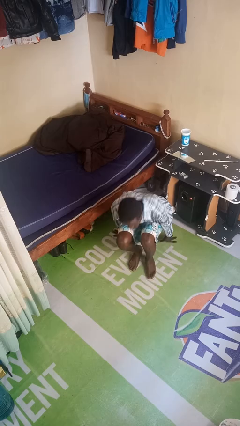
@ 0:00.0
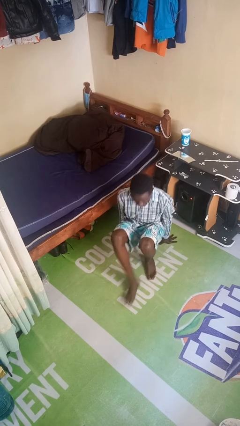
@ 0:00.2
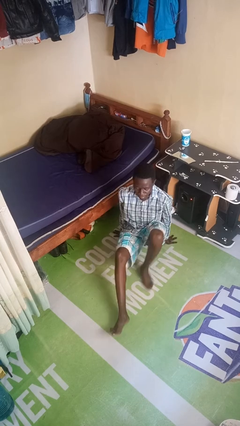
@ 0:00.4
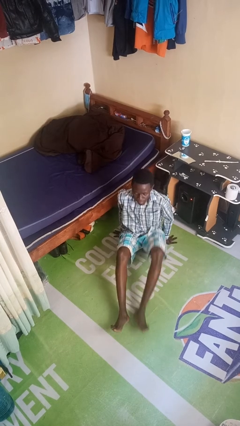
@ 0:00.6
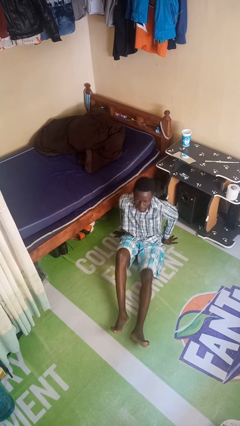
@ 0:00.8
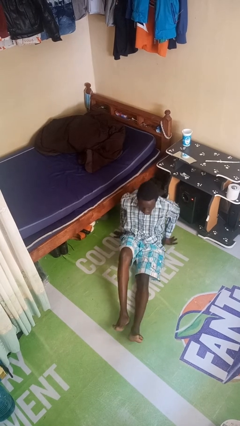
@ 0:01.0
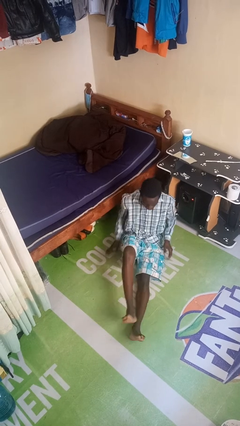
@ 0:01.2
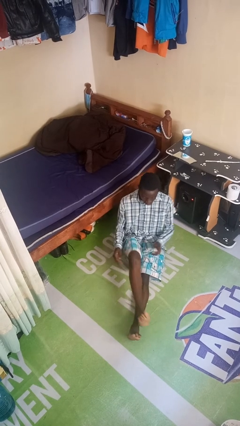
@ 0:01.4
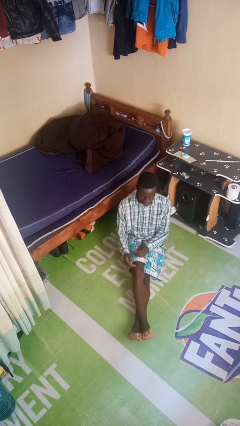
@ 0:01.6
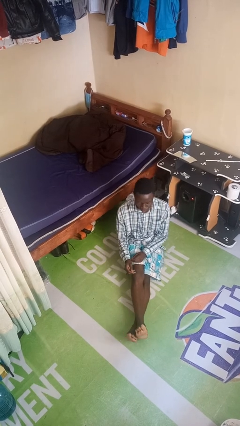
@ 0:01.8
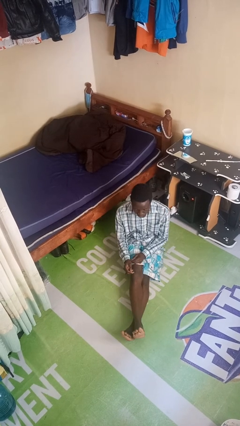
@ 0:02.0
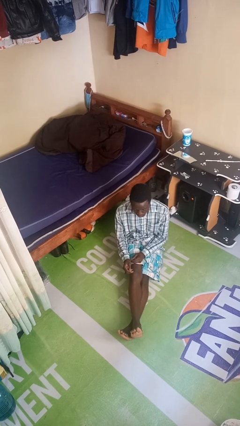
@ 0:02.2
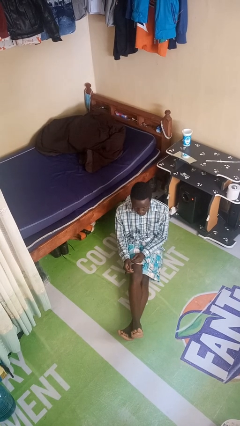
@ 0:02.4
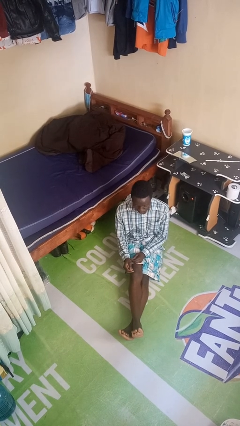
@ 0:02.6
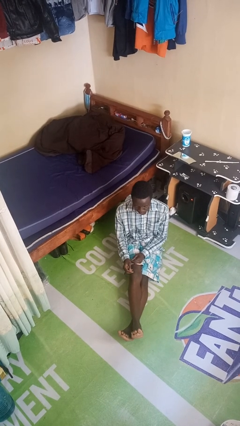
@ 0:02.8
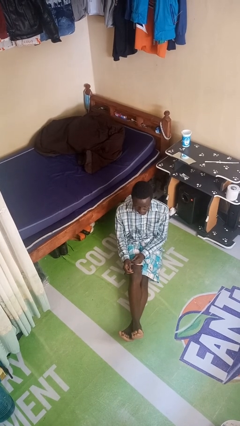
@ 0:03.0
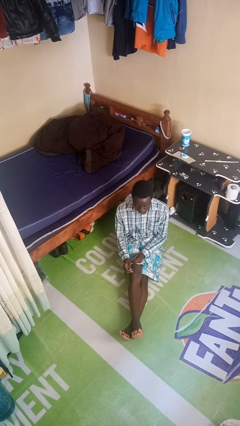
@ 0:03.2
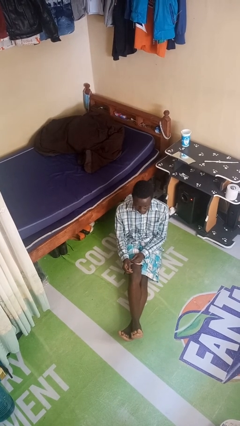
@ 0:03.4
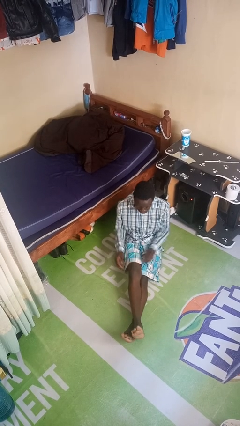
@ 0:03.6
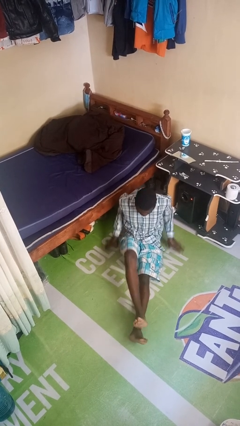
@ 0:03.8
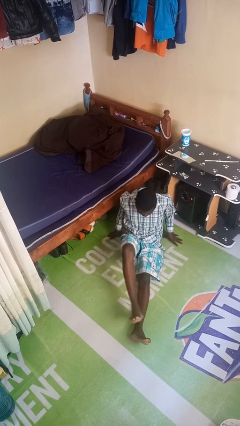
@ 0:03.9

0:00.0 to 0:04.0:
person sits crisscross

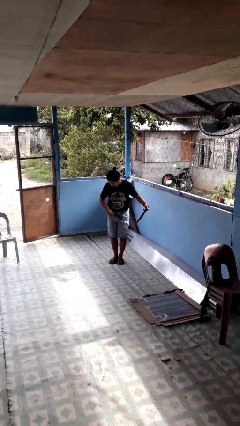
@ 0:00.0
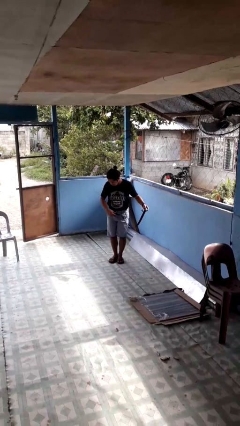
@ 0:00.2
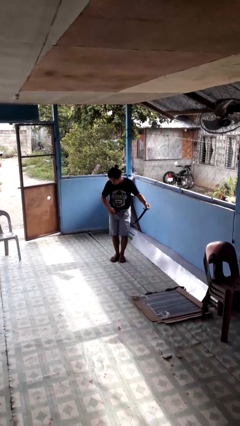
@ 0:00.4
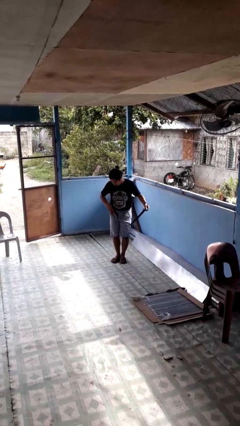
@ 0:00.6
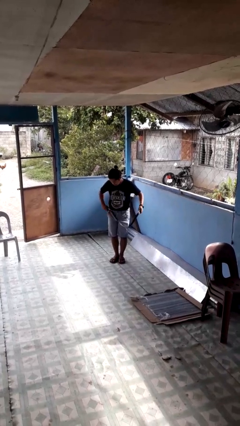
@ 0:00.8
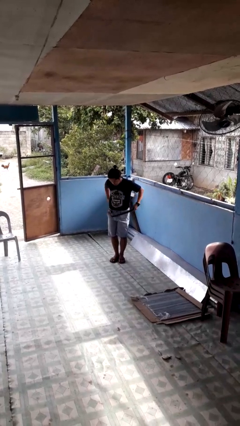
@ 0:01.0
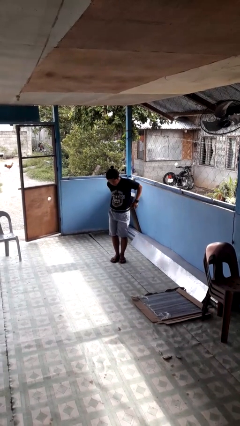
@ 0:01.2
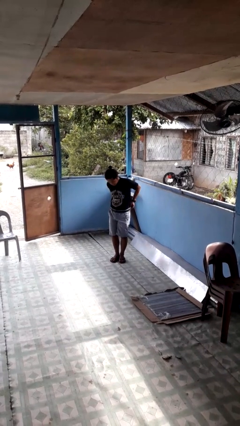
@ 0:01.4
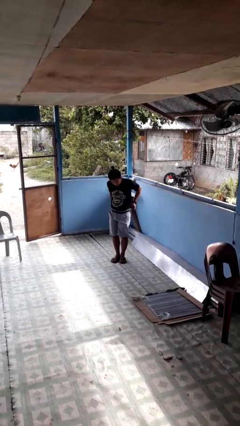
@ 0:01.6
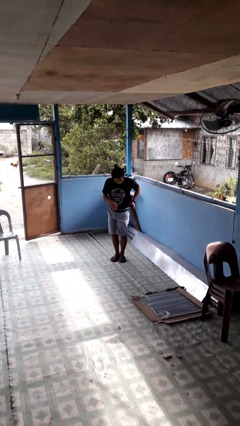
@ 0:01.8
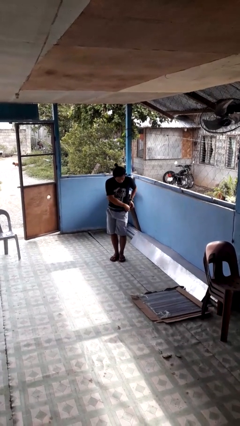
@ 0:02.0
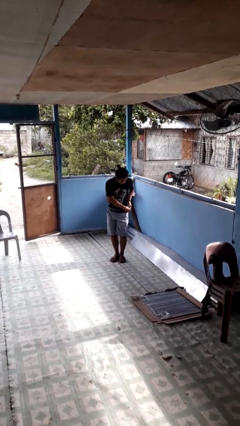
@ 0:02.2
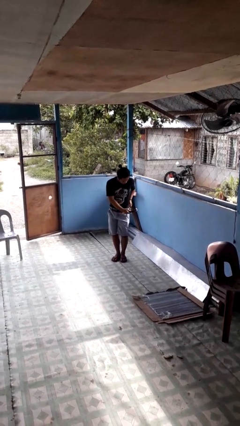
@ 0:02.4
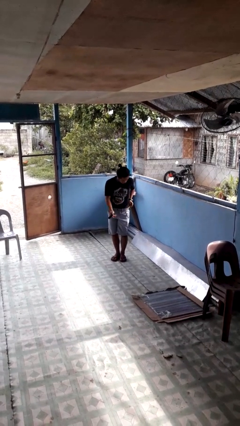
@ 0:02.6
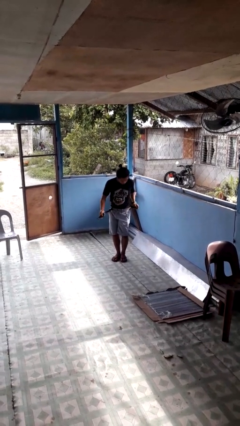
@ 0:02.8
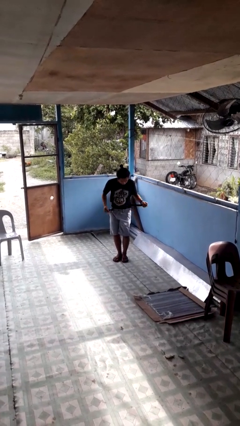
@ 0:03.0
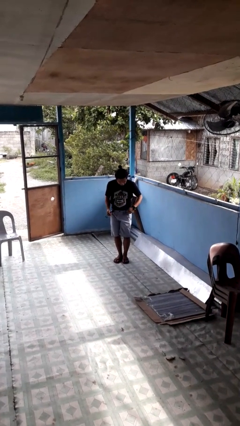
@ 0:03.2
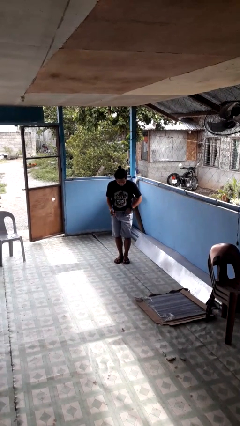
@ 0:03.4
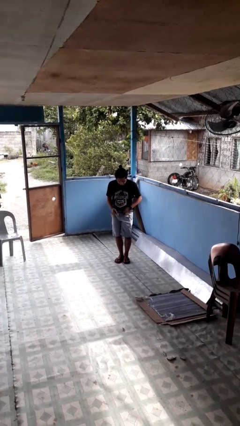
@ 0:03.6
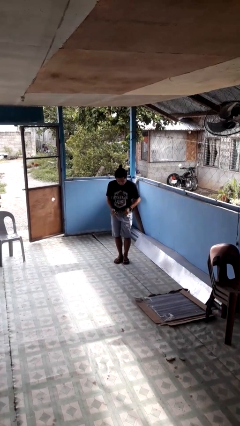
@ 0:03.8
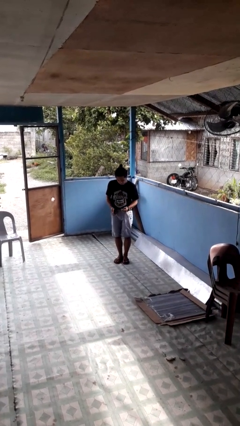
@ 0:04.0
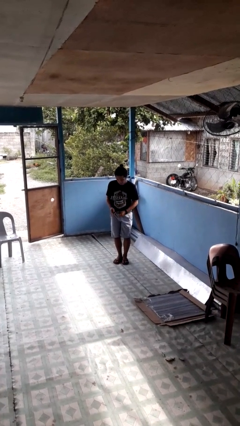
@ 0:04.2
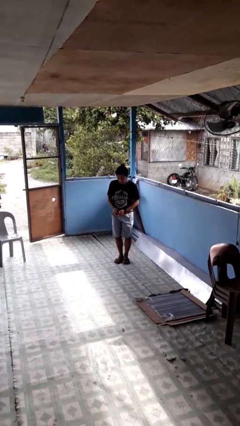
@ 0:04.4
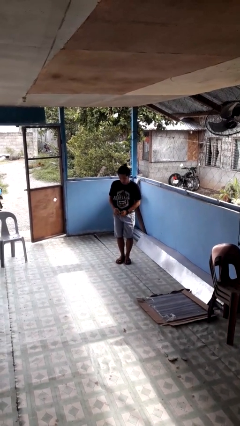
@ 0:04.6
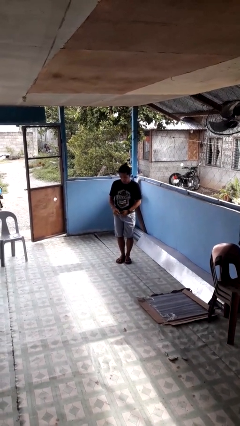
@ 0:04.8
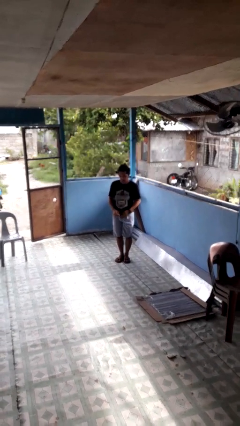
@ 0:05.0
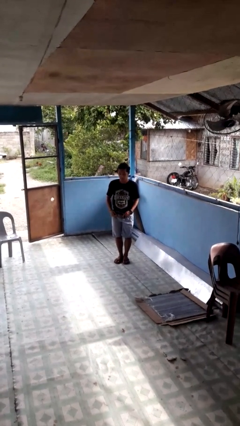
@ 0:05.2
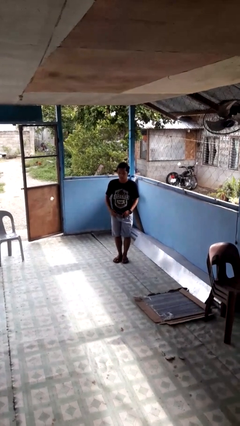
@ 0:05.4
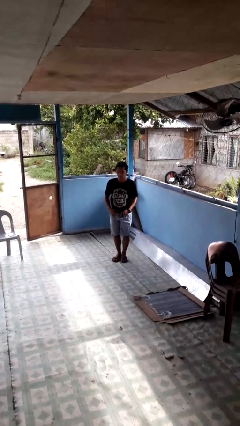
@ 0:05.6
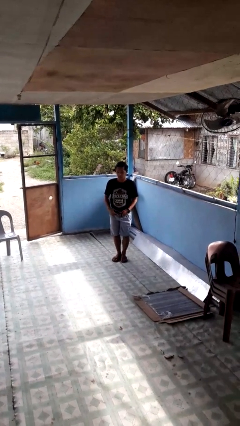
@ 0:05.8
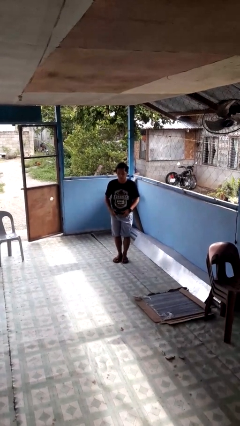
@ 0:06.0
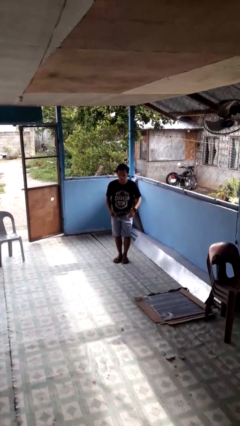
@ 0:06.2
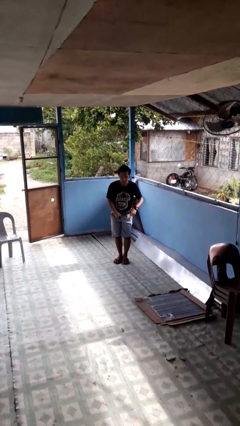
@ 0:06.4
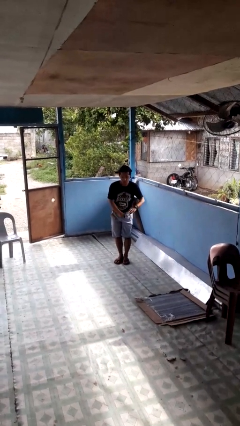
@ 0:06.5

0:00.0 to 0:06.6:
person puts on belt

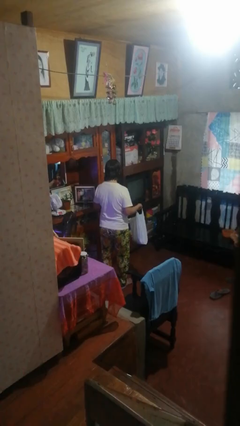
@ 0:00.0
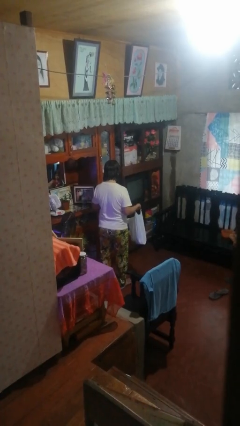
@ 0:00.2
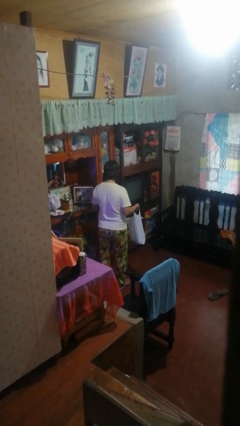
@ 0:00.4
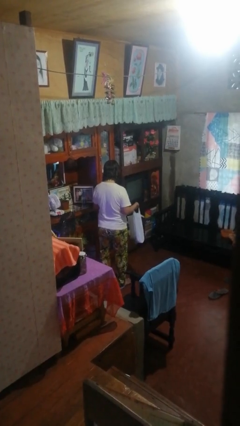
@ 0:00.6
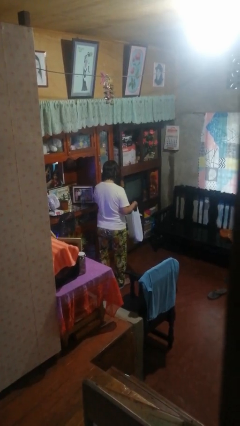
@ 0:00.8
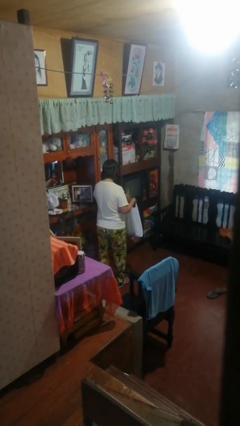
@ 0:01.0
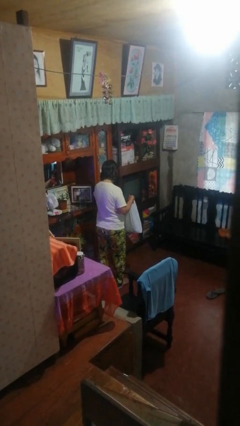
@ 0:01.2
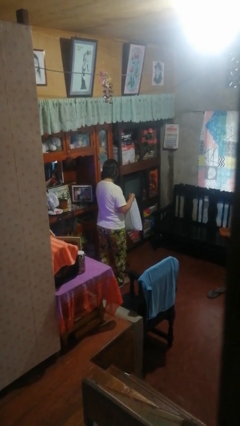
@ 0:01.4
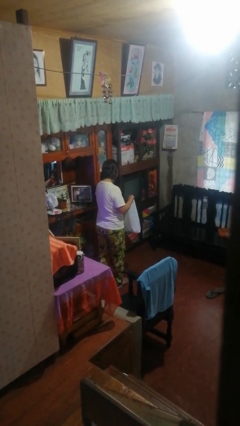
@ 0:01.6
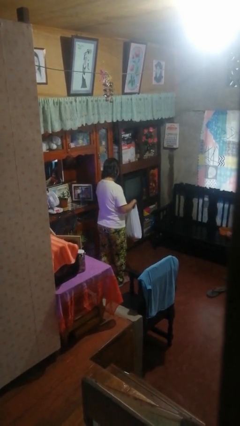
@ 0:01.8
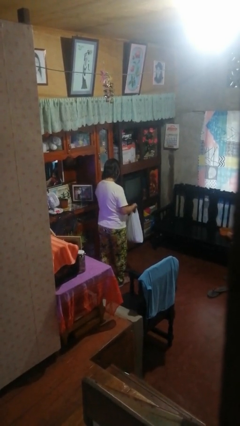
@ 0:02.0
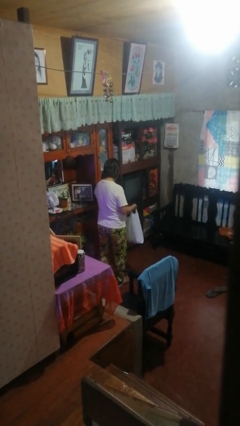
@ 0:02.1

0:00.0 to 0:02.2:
person puts object into bag

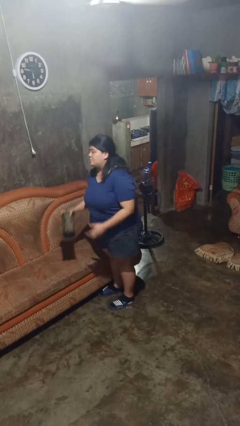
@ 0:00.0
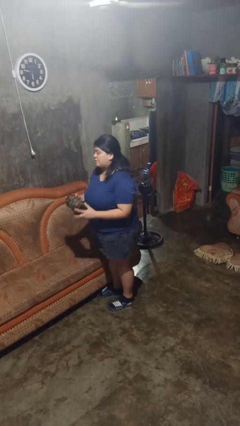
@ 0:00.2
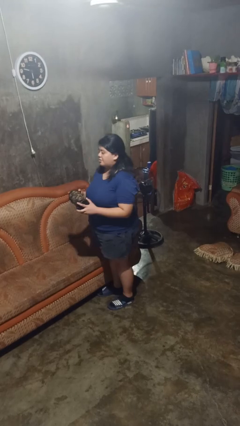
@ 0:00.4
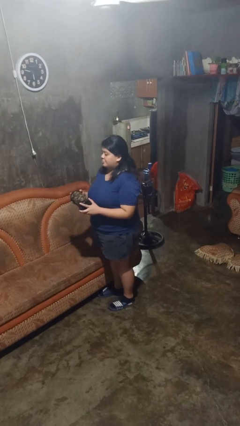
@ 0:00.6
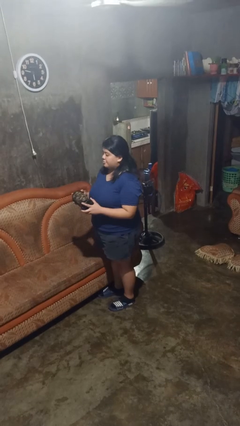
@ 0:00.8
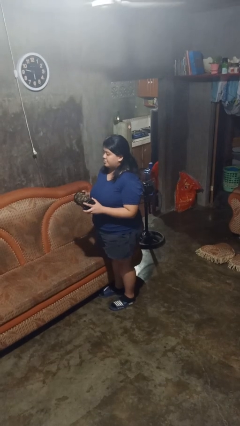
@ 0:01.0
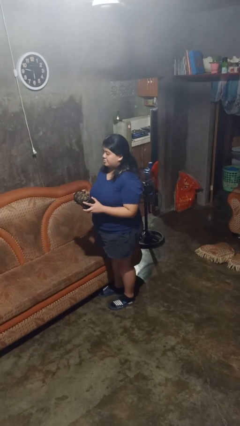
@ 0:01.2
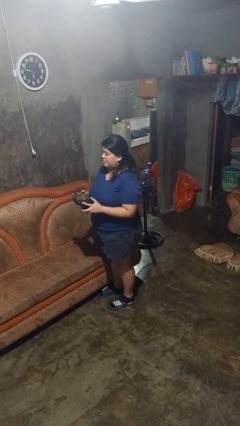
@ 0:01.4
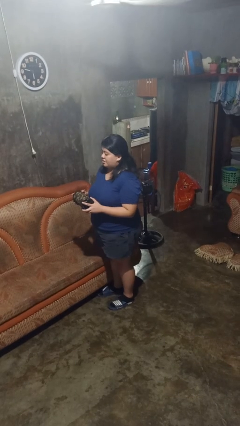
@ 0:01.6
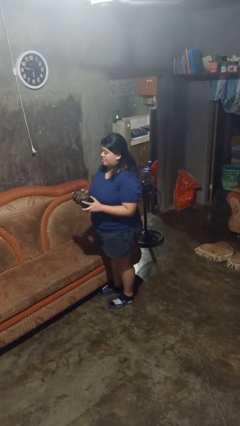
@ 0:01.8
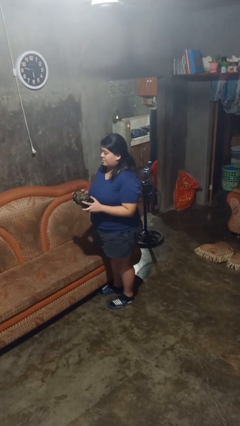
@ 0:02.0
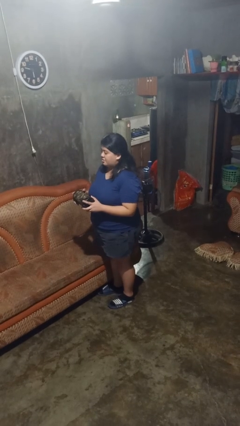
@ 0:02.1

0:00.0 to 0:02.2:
person picks up object from couch

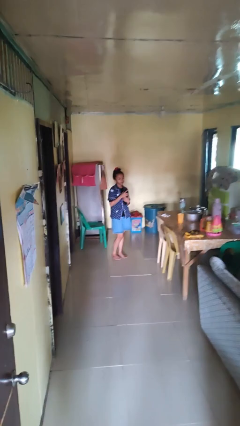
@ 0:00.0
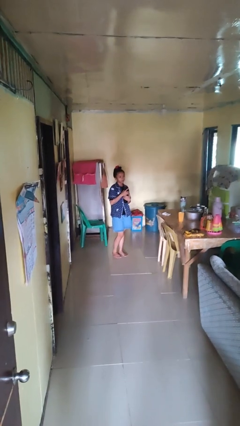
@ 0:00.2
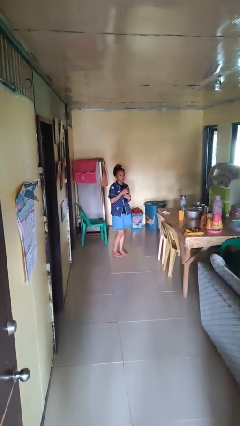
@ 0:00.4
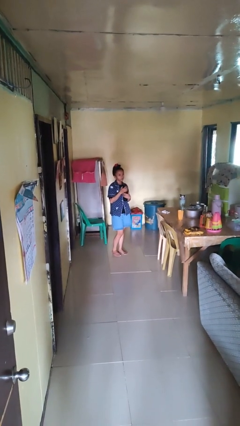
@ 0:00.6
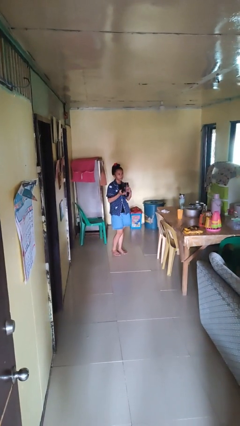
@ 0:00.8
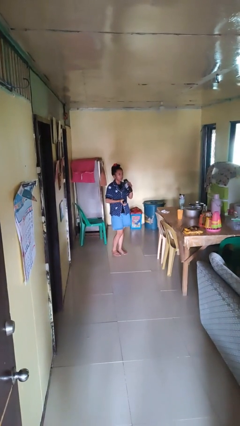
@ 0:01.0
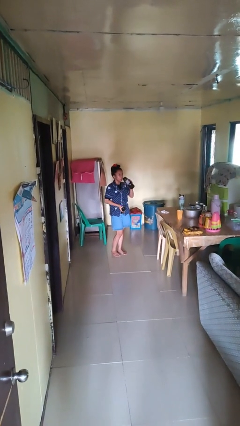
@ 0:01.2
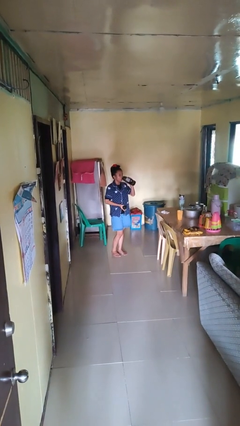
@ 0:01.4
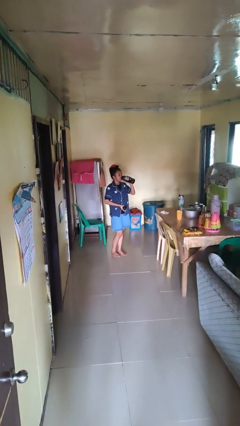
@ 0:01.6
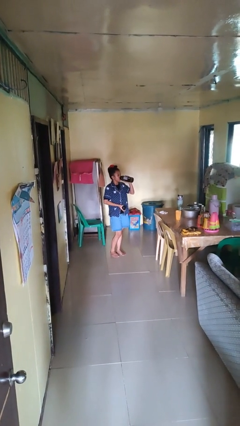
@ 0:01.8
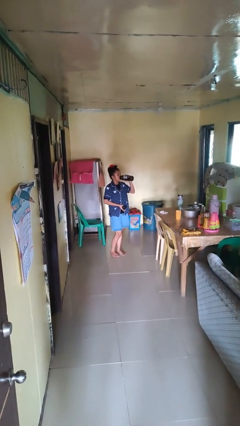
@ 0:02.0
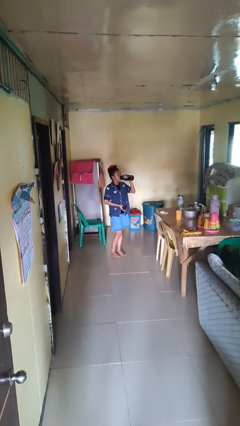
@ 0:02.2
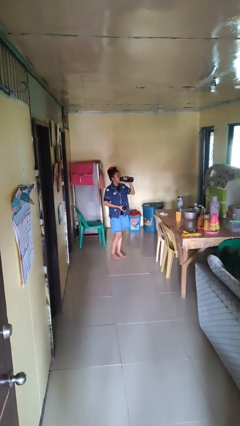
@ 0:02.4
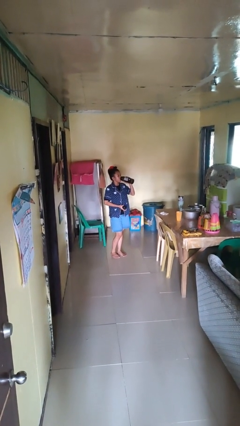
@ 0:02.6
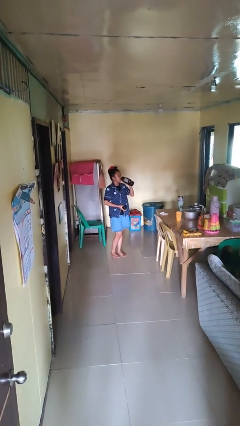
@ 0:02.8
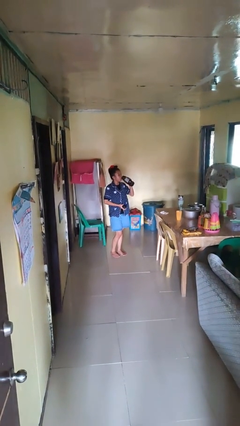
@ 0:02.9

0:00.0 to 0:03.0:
person drinks from bottle
